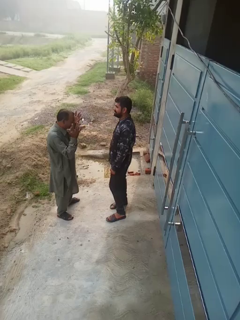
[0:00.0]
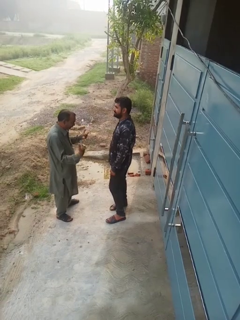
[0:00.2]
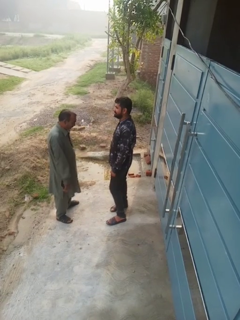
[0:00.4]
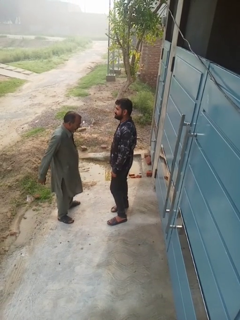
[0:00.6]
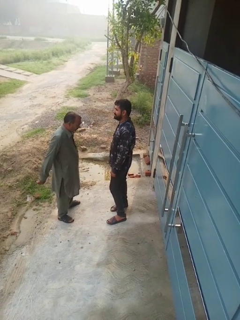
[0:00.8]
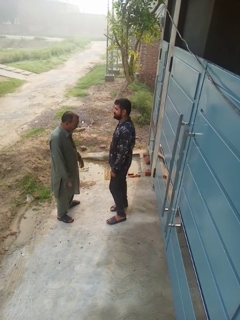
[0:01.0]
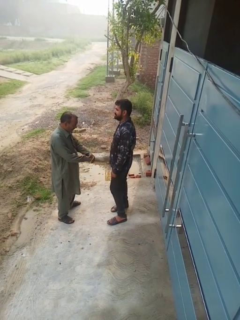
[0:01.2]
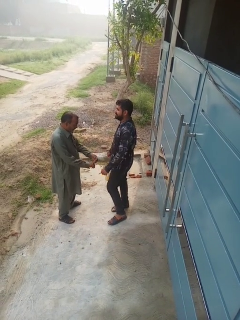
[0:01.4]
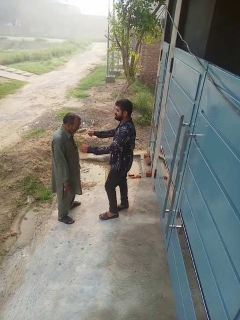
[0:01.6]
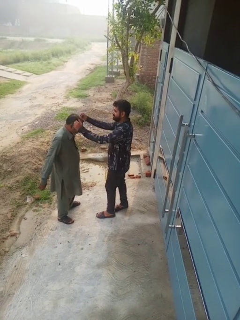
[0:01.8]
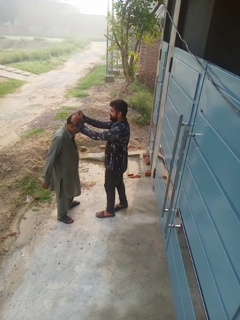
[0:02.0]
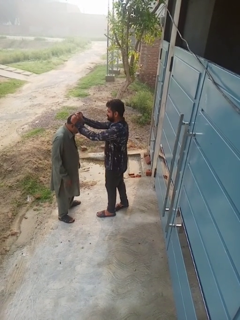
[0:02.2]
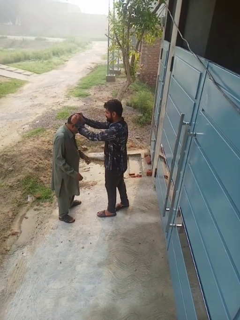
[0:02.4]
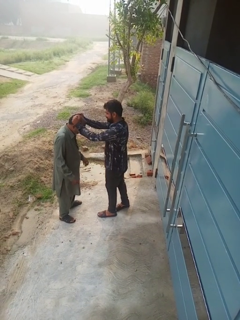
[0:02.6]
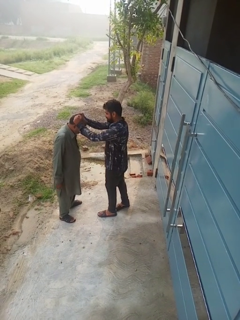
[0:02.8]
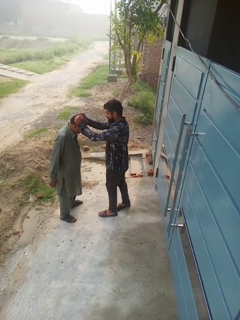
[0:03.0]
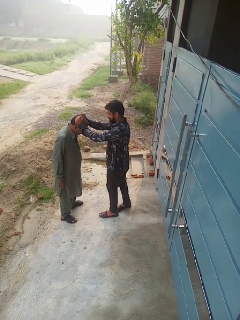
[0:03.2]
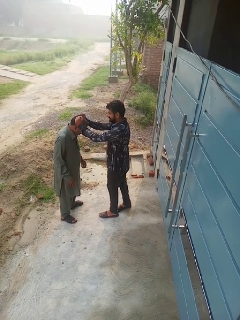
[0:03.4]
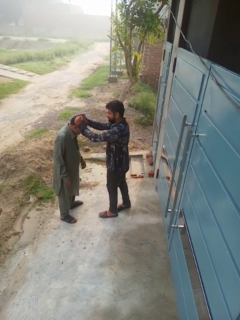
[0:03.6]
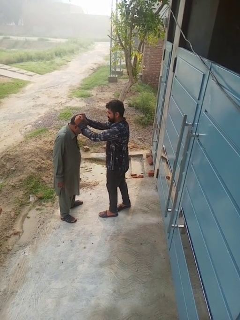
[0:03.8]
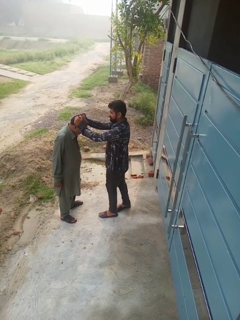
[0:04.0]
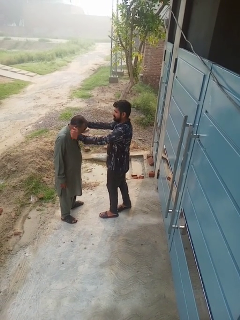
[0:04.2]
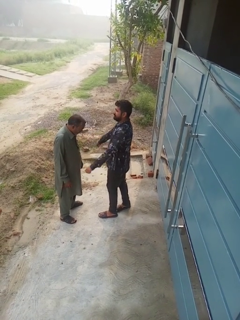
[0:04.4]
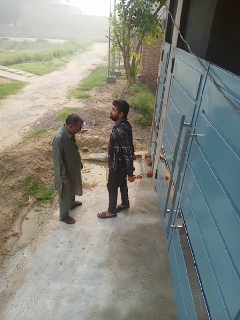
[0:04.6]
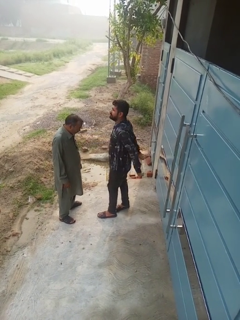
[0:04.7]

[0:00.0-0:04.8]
person grabs person by hair

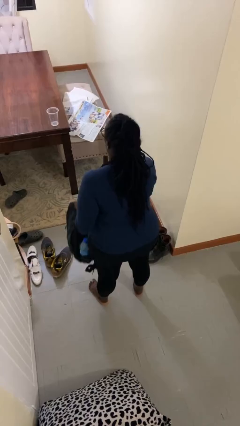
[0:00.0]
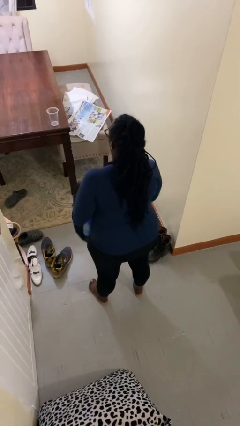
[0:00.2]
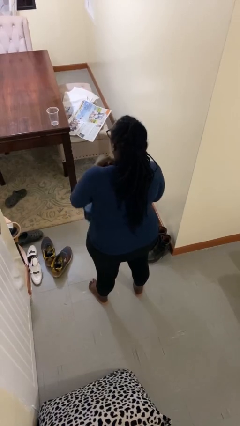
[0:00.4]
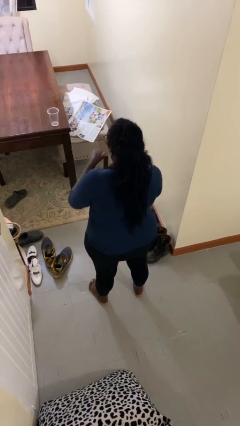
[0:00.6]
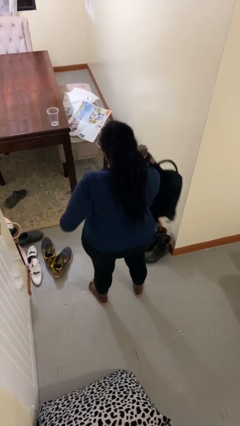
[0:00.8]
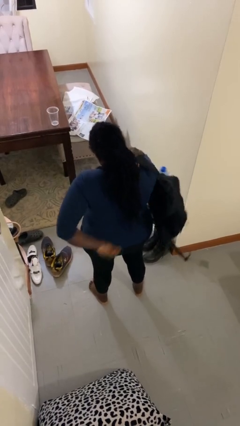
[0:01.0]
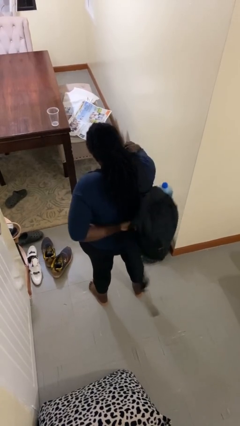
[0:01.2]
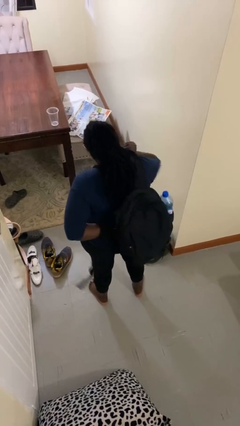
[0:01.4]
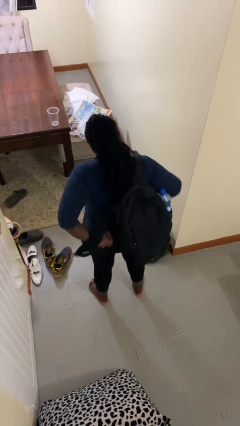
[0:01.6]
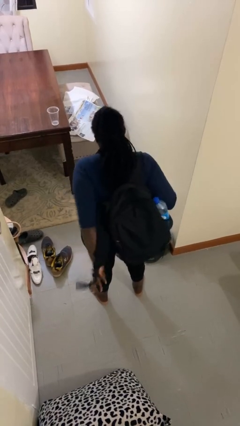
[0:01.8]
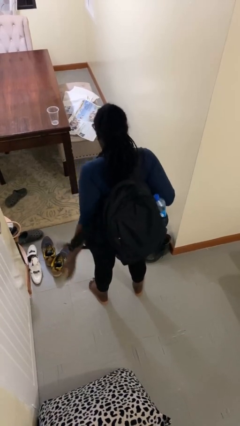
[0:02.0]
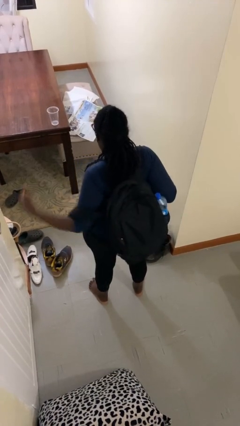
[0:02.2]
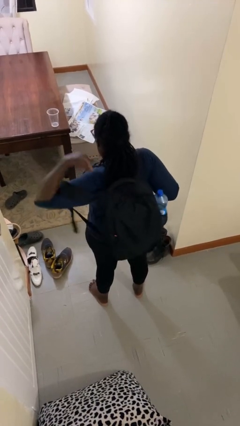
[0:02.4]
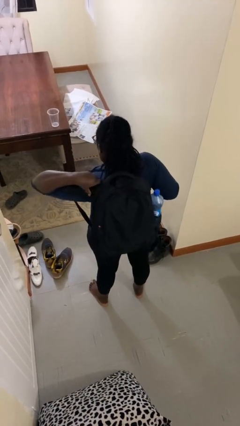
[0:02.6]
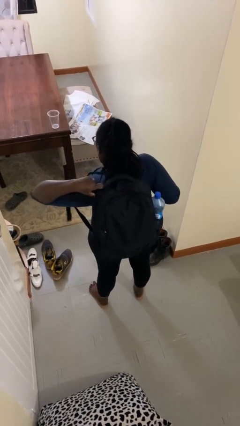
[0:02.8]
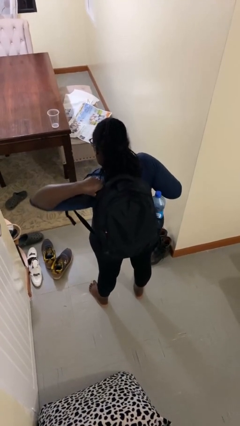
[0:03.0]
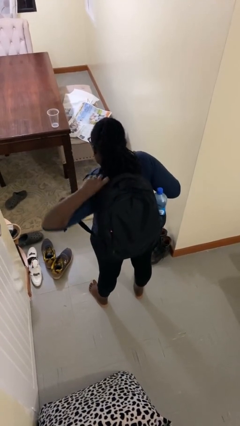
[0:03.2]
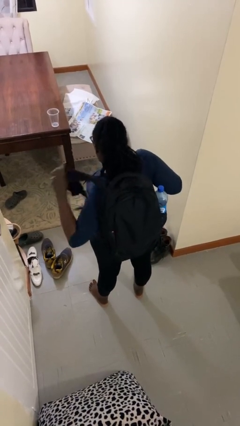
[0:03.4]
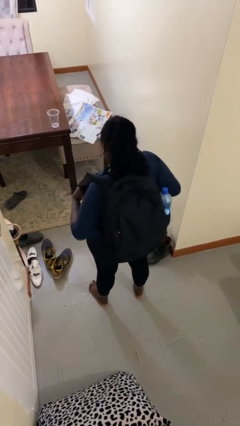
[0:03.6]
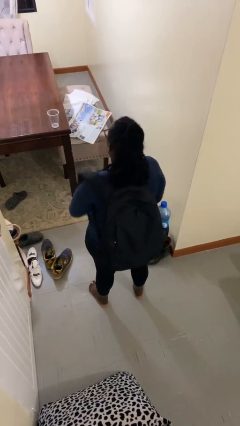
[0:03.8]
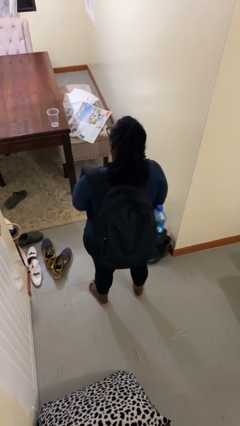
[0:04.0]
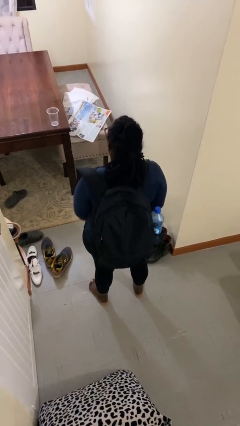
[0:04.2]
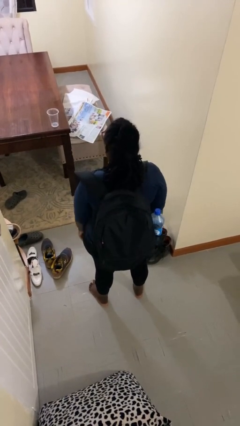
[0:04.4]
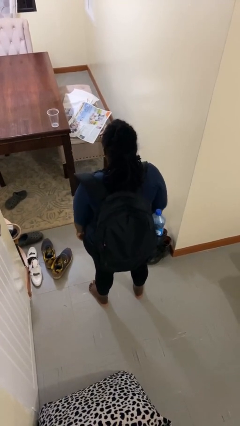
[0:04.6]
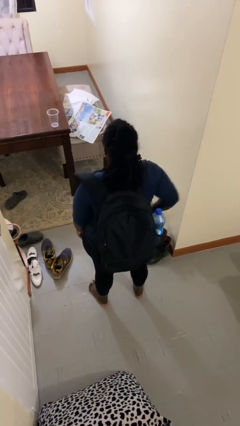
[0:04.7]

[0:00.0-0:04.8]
person puts on backpack

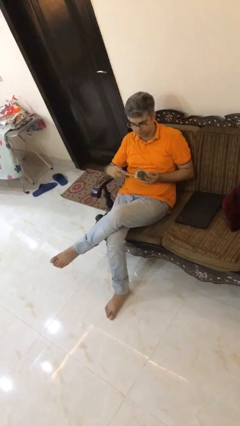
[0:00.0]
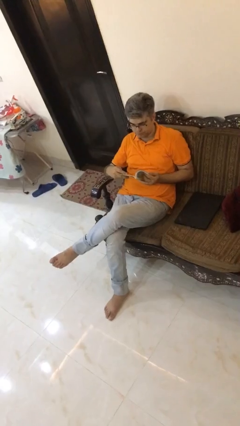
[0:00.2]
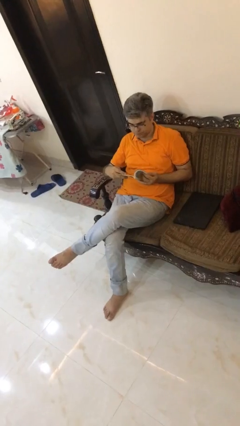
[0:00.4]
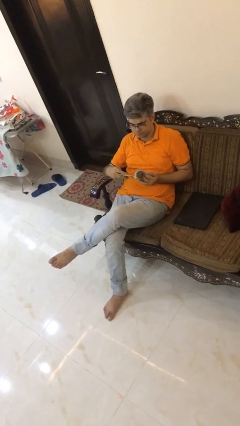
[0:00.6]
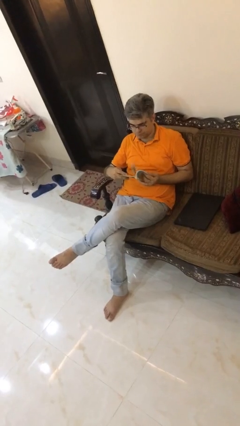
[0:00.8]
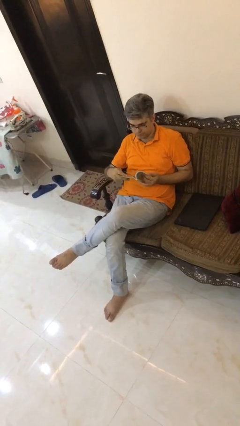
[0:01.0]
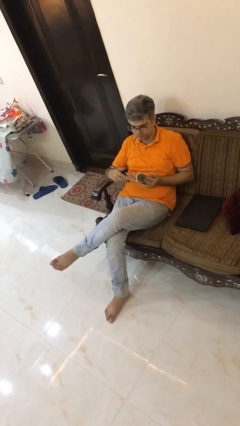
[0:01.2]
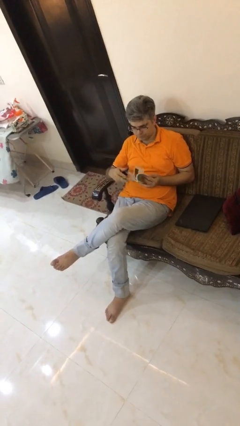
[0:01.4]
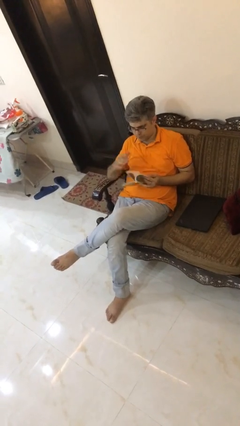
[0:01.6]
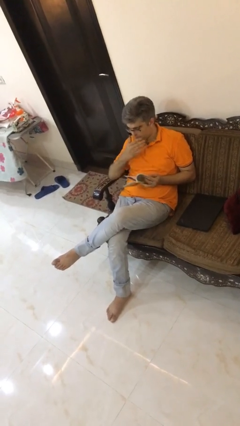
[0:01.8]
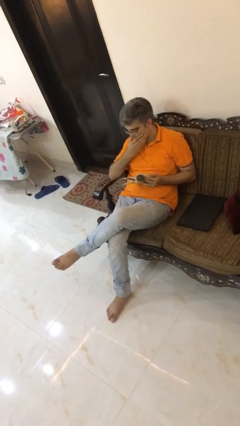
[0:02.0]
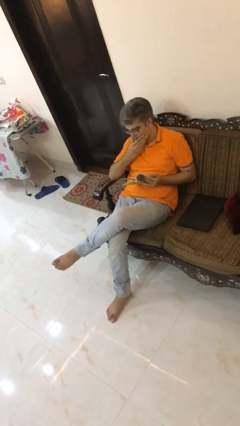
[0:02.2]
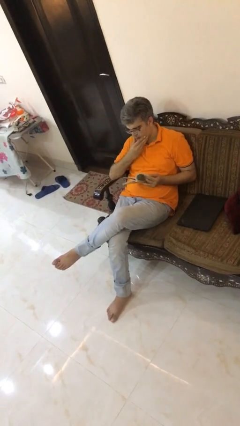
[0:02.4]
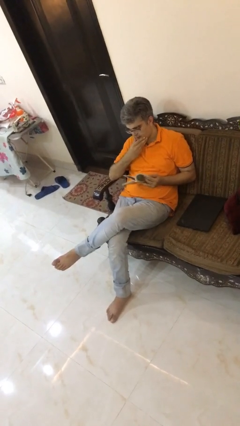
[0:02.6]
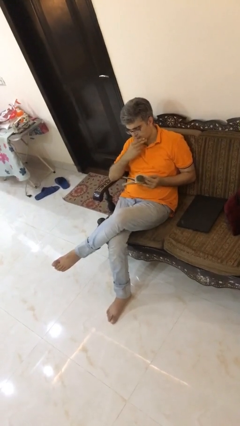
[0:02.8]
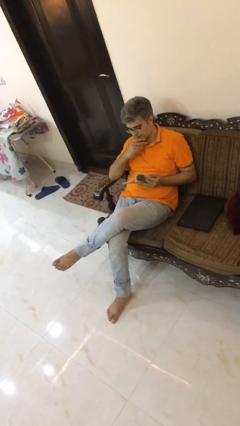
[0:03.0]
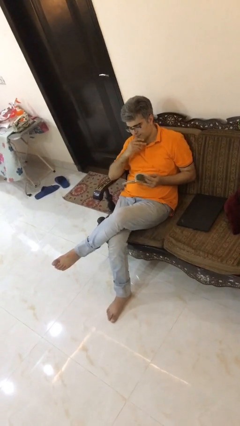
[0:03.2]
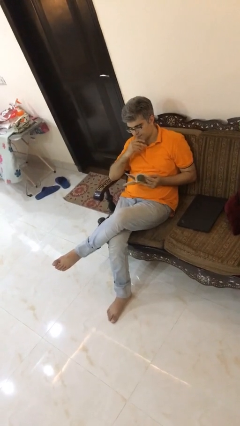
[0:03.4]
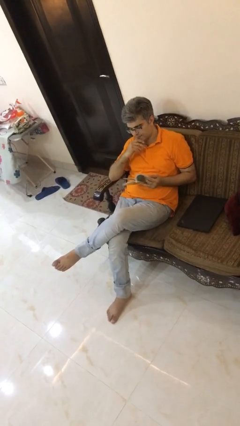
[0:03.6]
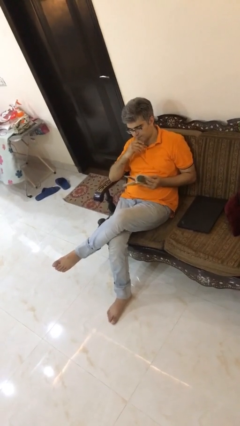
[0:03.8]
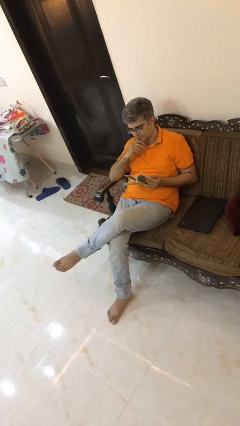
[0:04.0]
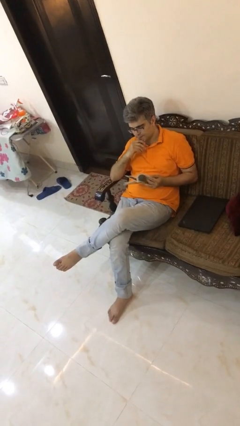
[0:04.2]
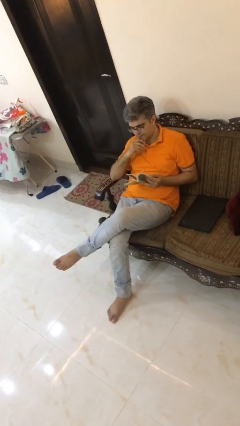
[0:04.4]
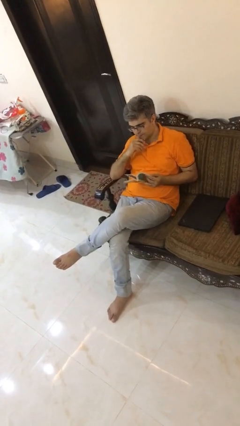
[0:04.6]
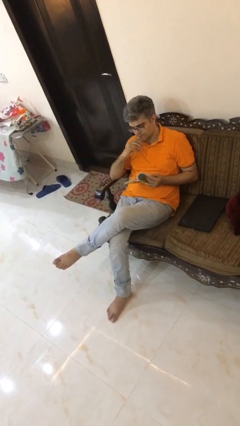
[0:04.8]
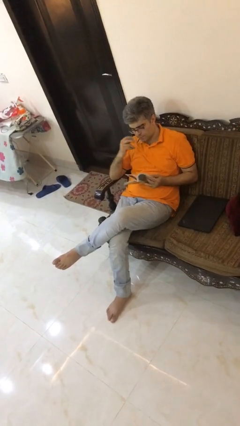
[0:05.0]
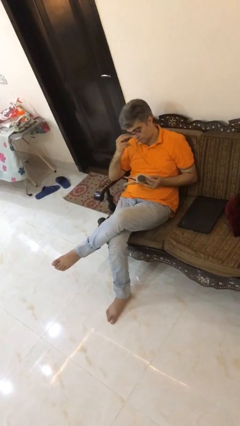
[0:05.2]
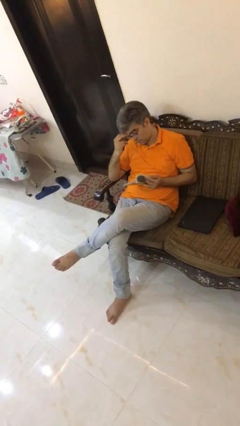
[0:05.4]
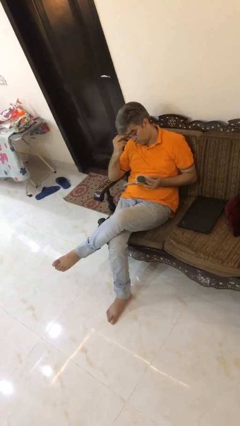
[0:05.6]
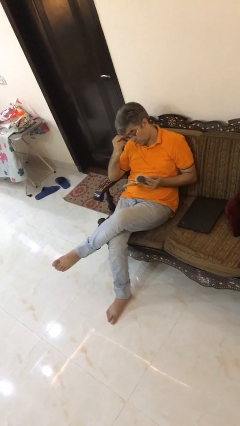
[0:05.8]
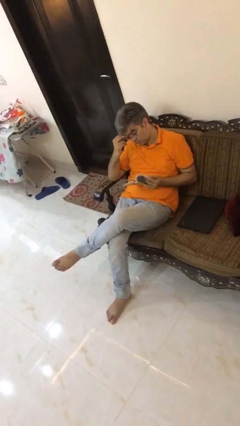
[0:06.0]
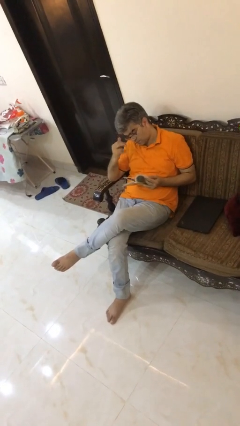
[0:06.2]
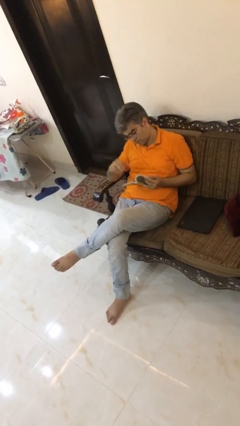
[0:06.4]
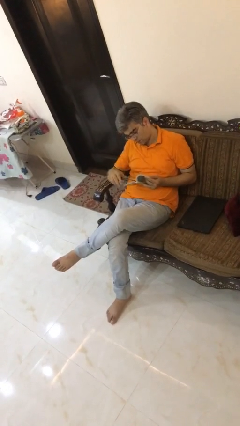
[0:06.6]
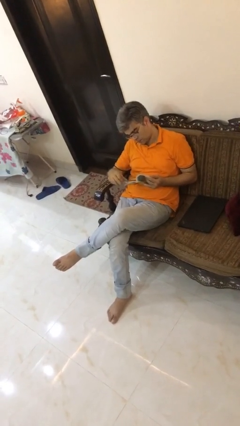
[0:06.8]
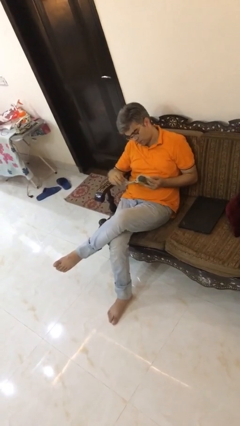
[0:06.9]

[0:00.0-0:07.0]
person reads document

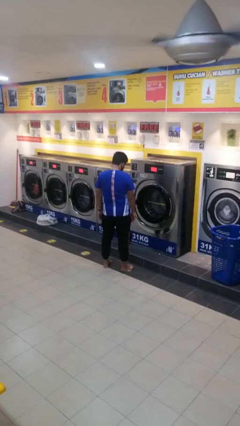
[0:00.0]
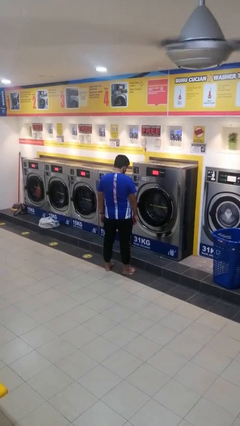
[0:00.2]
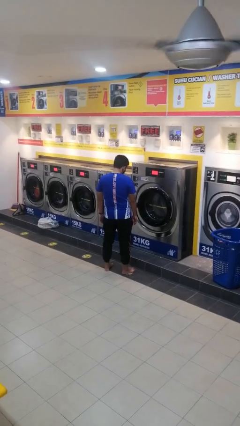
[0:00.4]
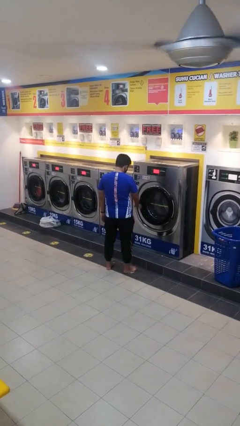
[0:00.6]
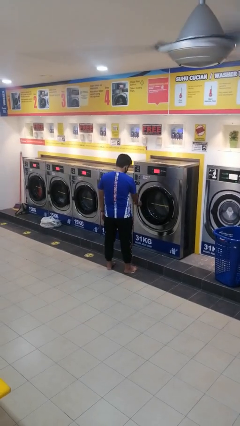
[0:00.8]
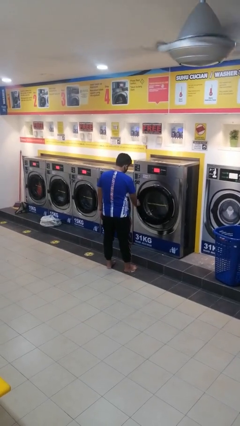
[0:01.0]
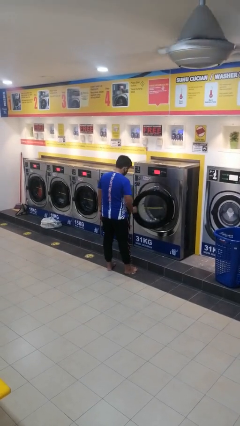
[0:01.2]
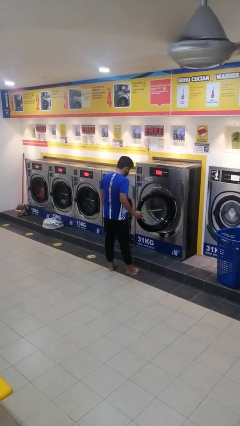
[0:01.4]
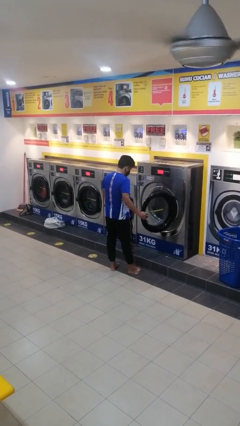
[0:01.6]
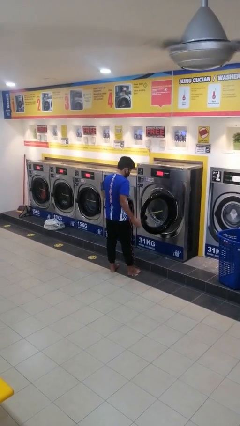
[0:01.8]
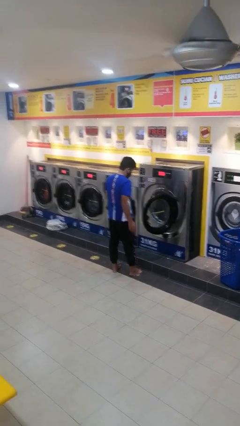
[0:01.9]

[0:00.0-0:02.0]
person opens clothes washer

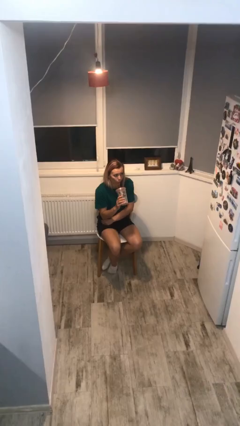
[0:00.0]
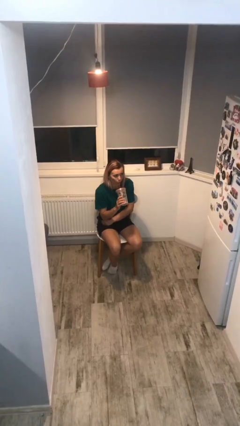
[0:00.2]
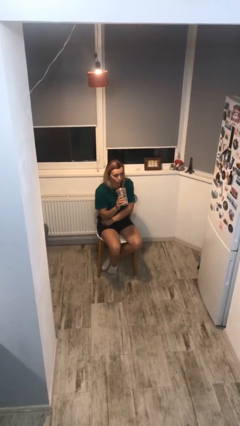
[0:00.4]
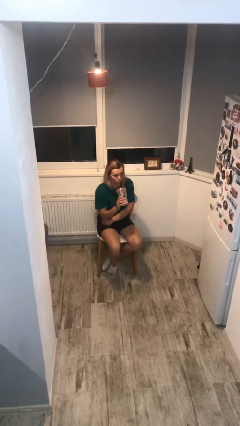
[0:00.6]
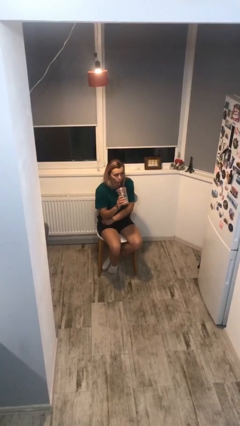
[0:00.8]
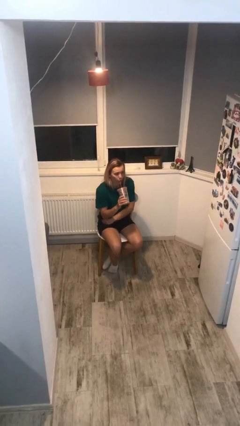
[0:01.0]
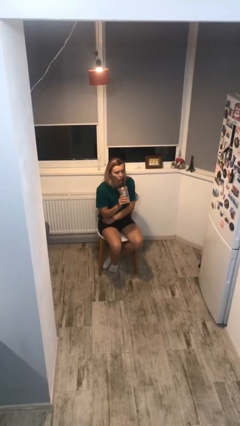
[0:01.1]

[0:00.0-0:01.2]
person drinks from straw
